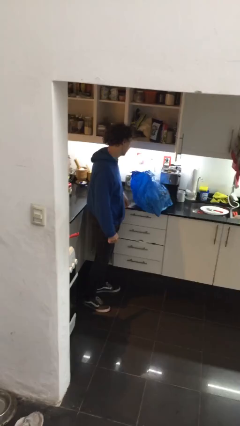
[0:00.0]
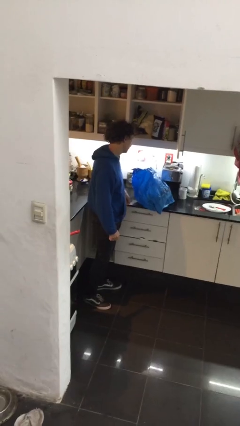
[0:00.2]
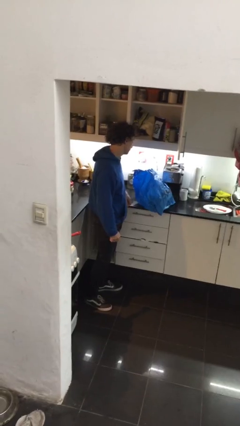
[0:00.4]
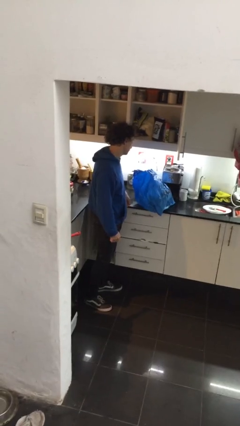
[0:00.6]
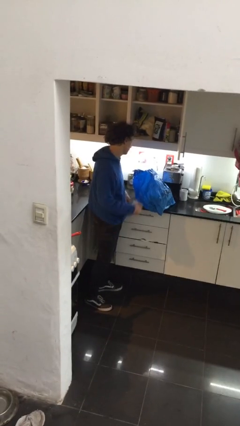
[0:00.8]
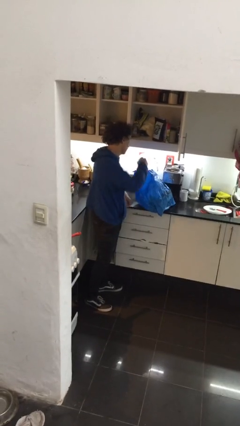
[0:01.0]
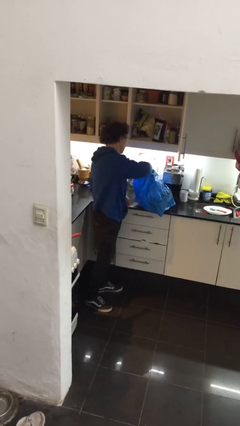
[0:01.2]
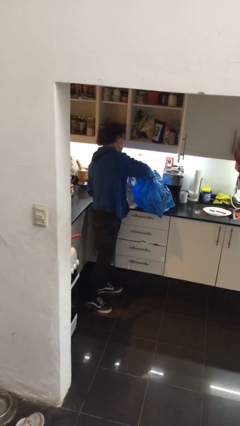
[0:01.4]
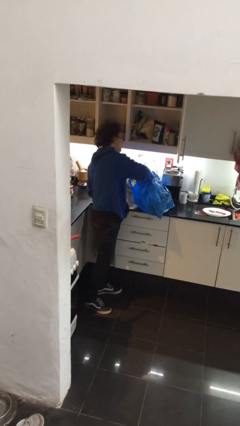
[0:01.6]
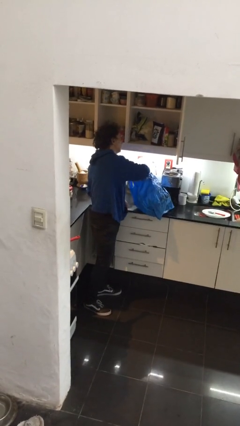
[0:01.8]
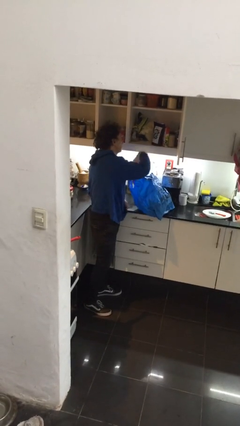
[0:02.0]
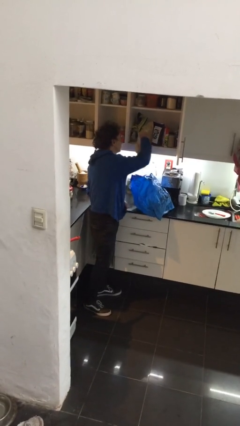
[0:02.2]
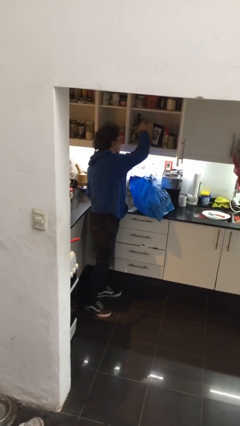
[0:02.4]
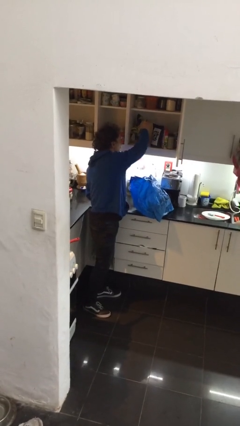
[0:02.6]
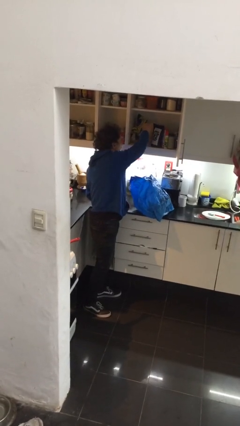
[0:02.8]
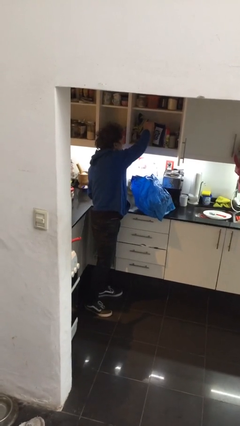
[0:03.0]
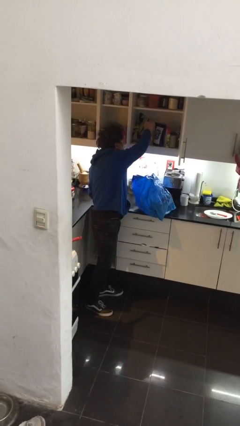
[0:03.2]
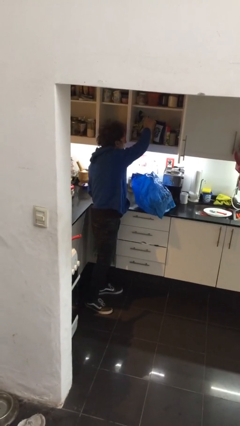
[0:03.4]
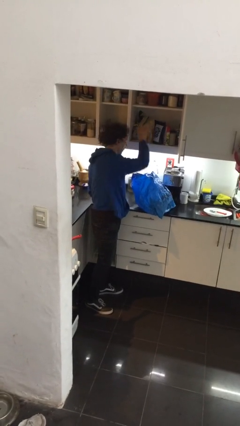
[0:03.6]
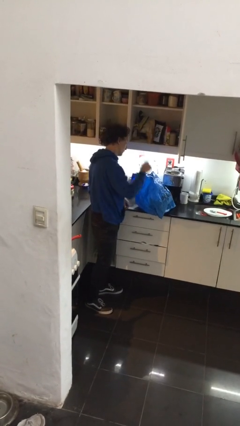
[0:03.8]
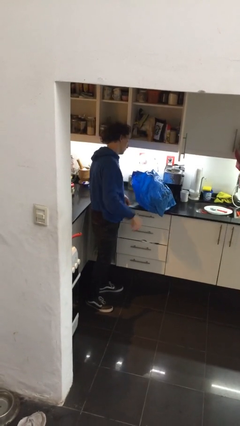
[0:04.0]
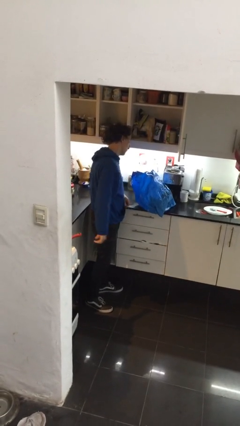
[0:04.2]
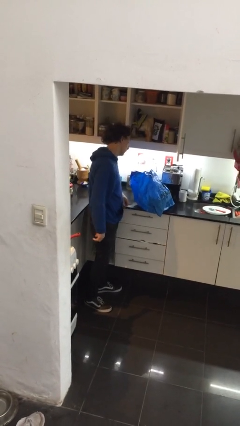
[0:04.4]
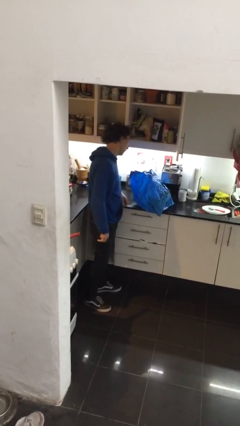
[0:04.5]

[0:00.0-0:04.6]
person loads groceries into cabinet

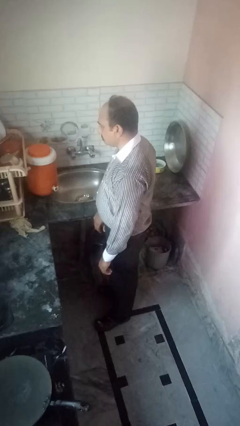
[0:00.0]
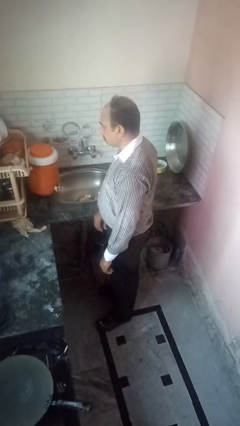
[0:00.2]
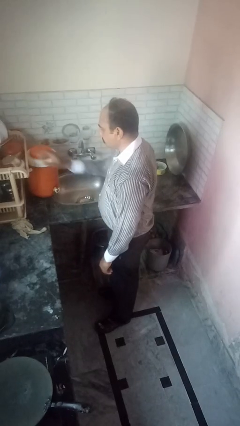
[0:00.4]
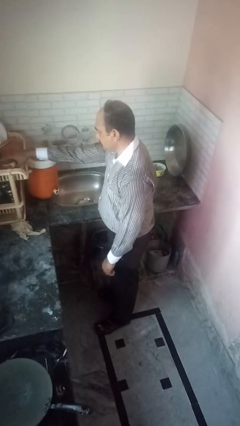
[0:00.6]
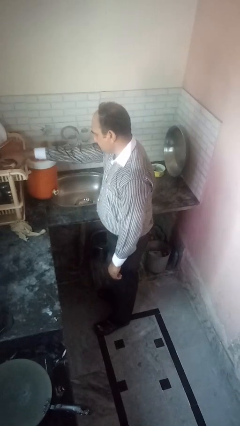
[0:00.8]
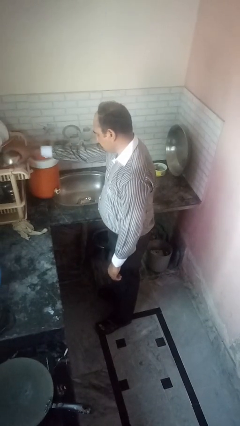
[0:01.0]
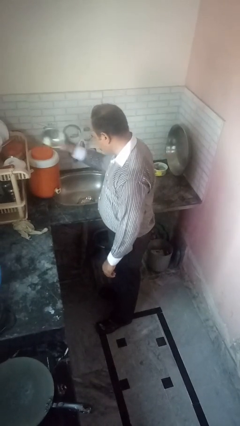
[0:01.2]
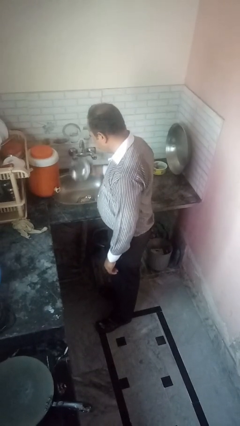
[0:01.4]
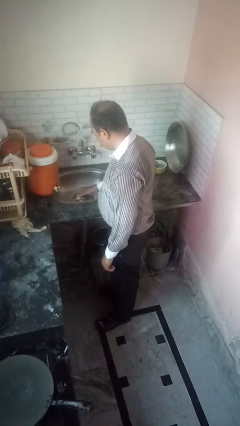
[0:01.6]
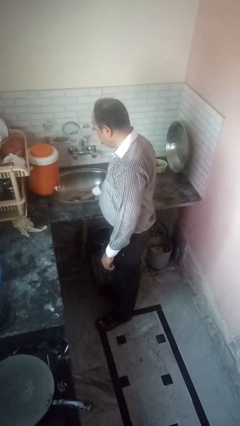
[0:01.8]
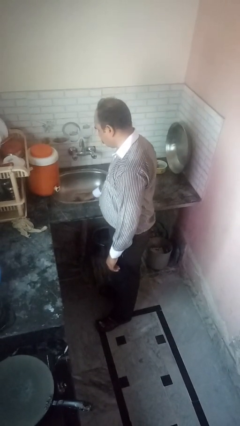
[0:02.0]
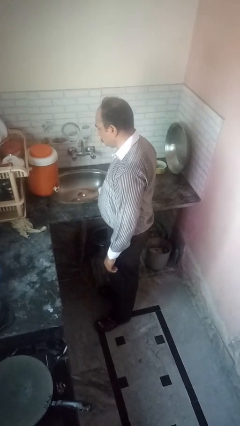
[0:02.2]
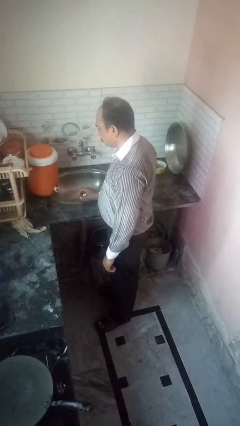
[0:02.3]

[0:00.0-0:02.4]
person loads dishwasher

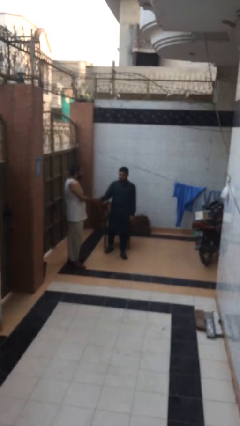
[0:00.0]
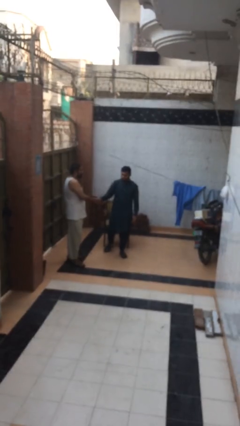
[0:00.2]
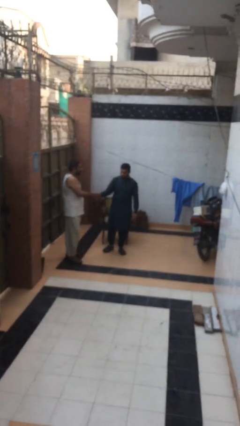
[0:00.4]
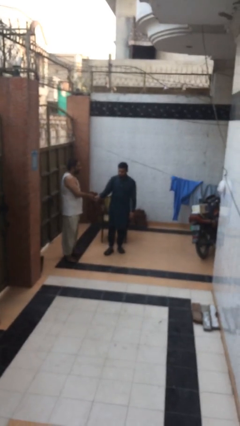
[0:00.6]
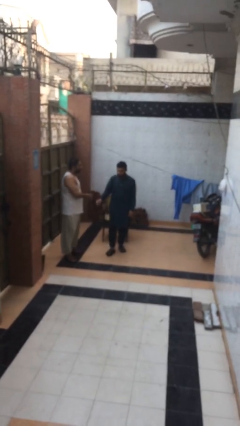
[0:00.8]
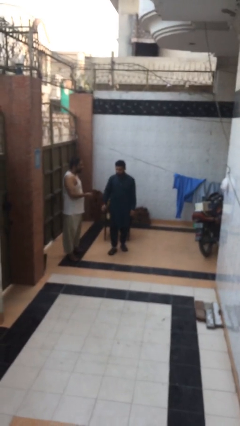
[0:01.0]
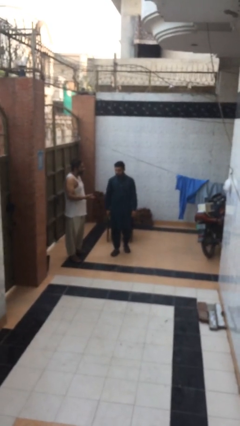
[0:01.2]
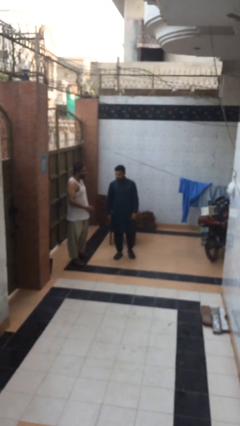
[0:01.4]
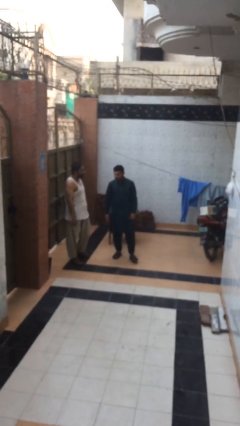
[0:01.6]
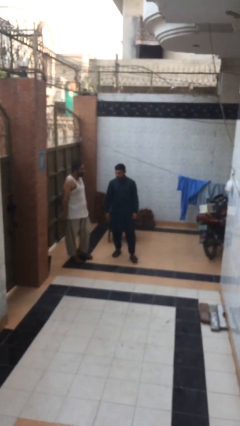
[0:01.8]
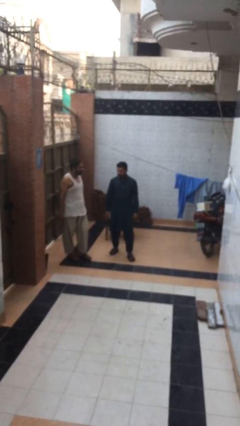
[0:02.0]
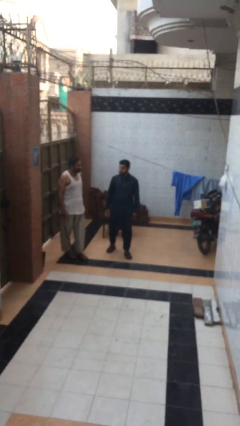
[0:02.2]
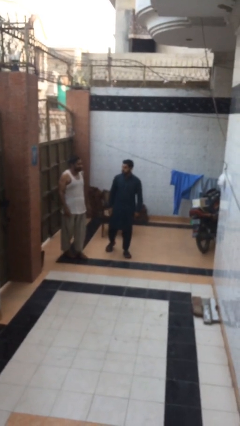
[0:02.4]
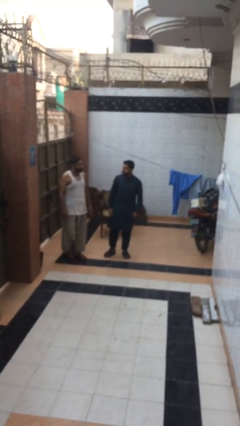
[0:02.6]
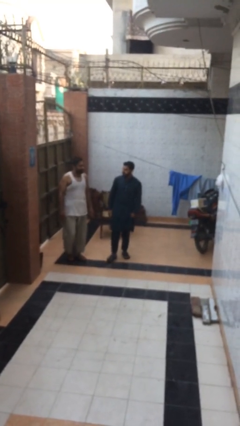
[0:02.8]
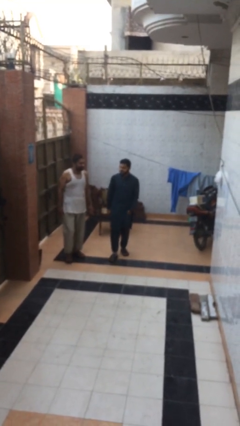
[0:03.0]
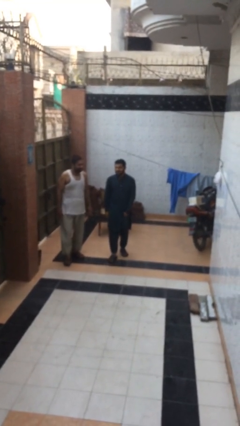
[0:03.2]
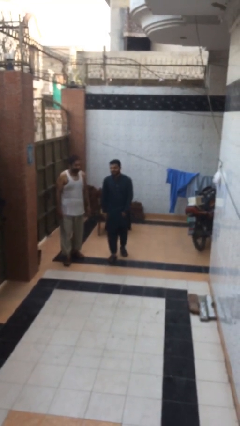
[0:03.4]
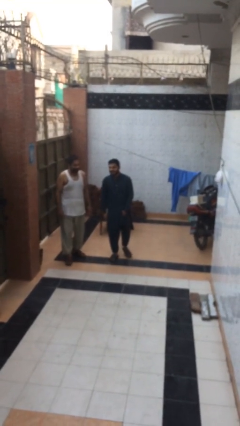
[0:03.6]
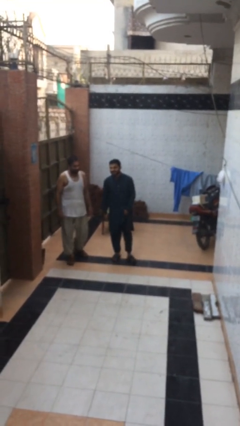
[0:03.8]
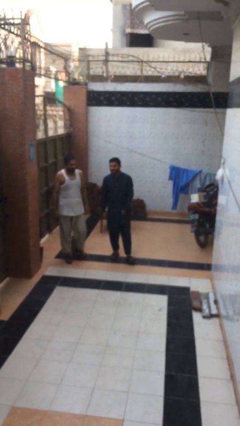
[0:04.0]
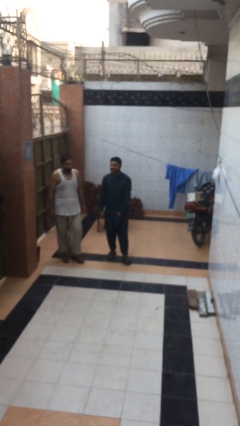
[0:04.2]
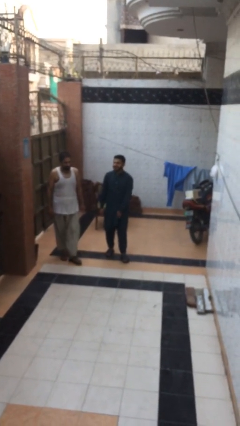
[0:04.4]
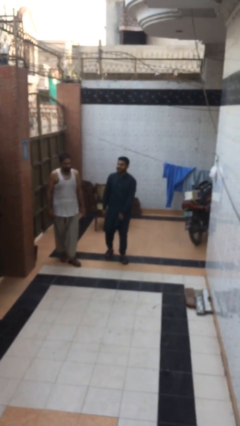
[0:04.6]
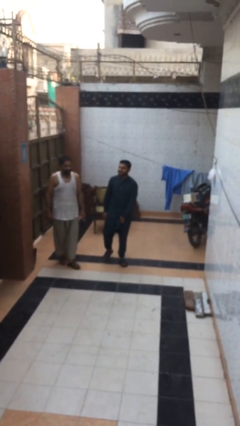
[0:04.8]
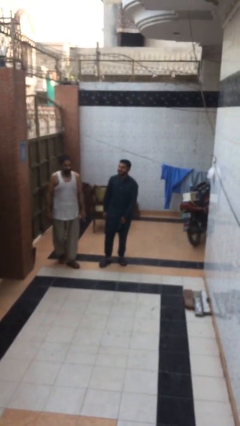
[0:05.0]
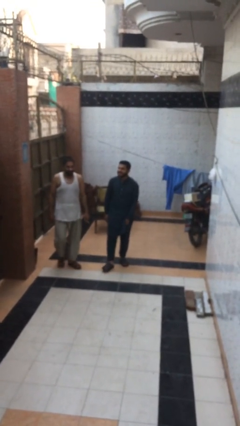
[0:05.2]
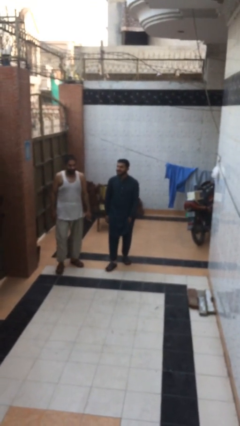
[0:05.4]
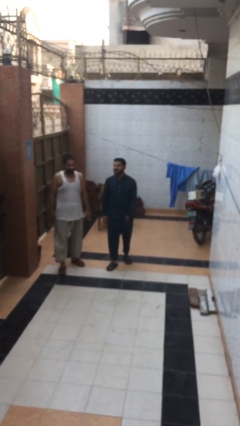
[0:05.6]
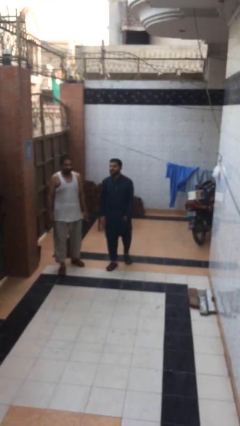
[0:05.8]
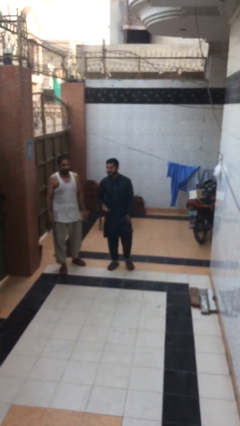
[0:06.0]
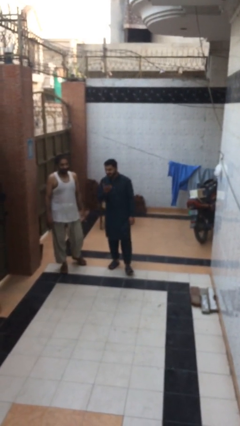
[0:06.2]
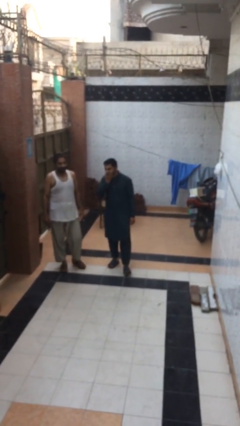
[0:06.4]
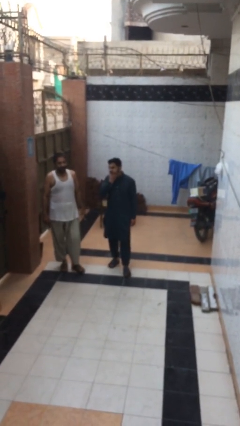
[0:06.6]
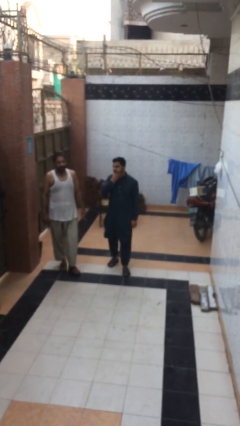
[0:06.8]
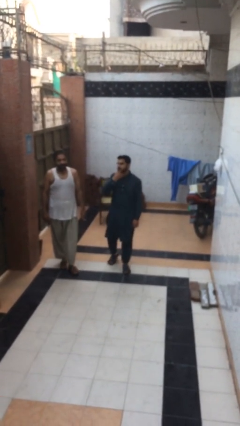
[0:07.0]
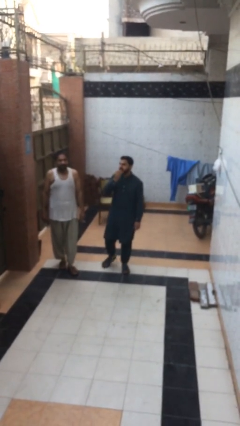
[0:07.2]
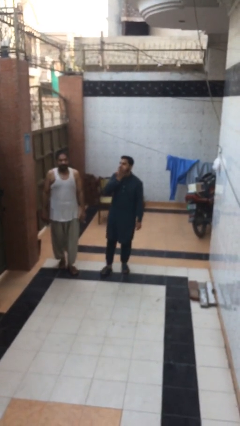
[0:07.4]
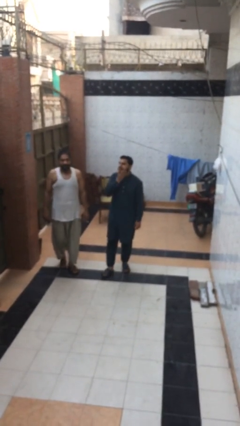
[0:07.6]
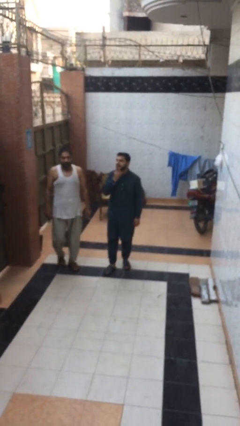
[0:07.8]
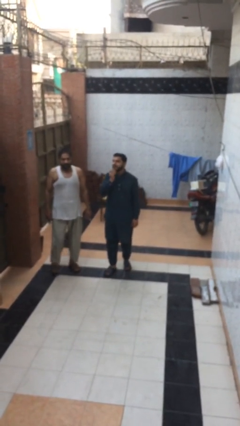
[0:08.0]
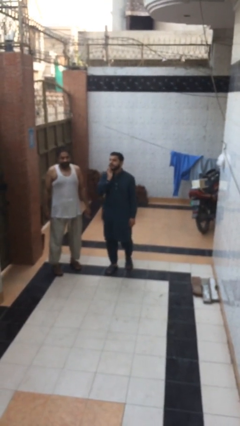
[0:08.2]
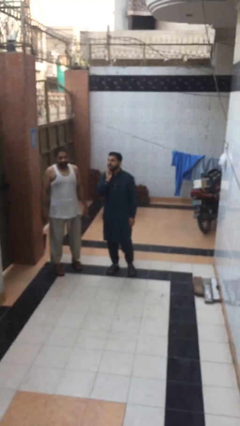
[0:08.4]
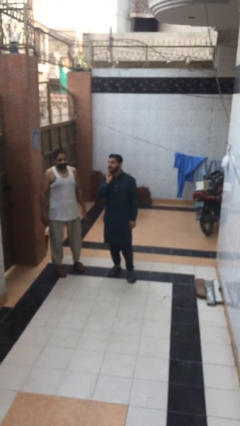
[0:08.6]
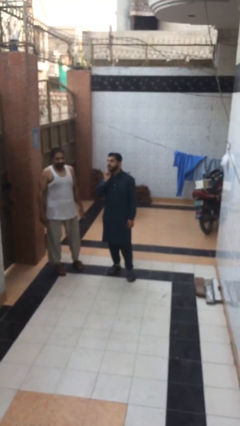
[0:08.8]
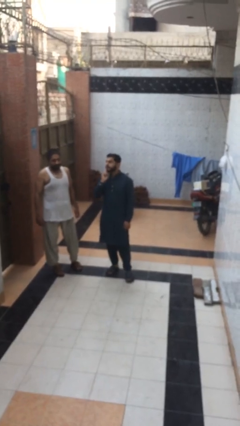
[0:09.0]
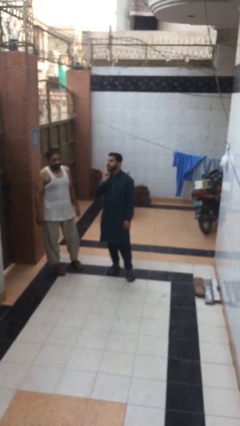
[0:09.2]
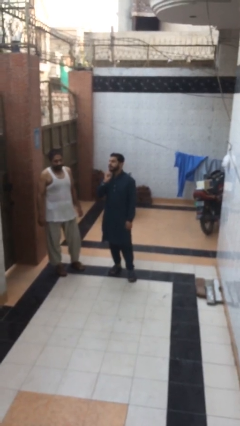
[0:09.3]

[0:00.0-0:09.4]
person talks to person

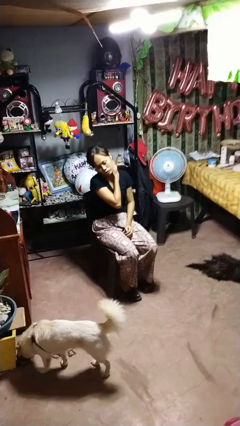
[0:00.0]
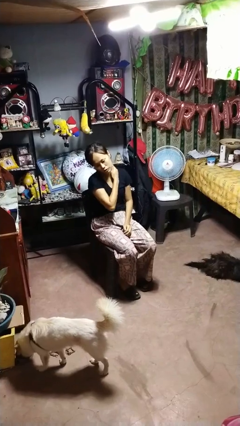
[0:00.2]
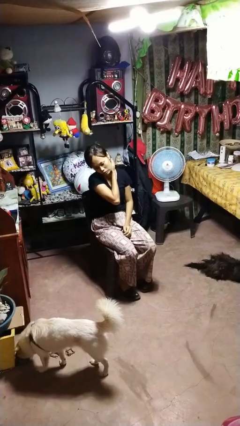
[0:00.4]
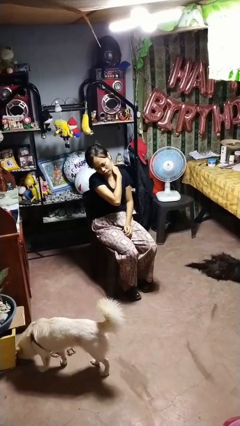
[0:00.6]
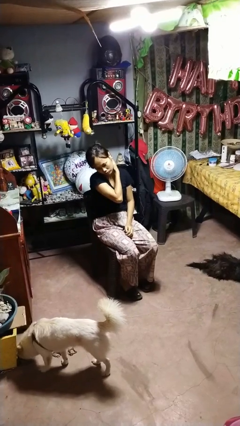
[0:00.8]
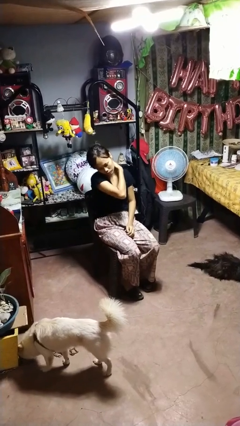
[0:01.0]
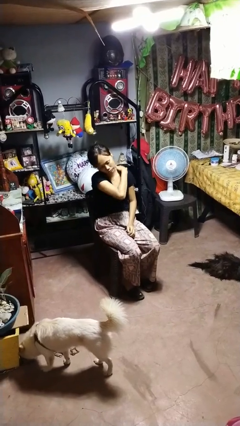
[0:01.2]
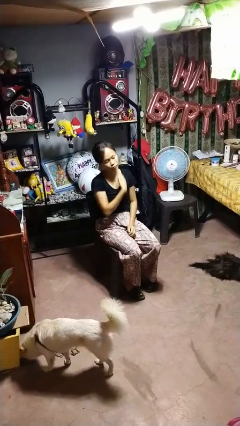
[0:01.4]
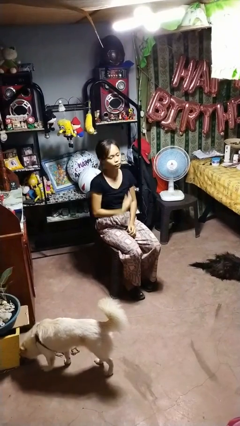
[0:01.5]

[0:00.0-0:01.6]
person rubs neck
